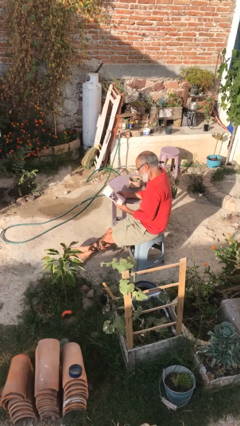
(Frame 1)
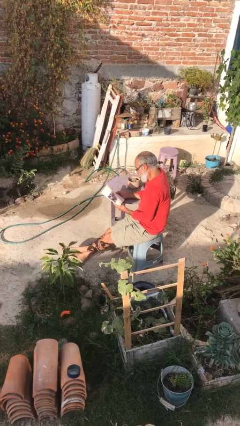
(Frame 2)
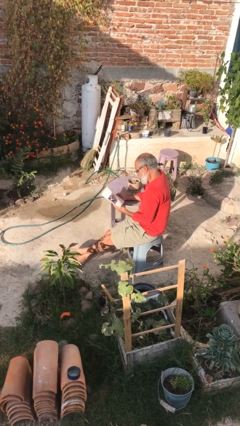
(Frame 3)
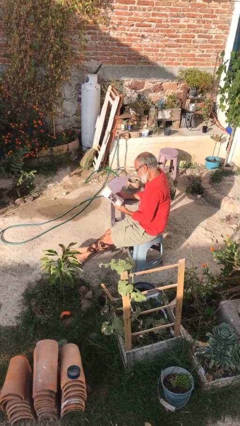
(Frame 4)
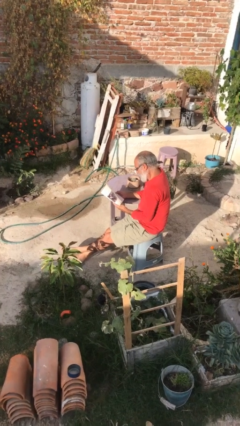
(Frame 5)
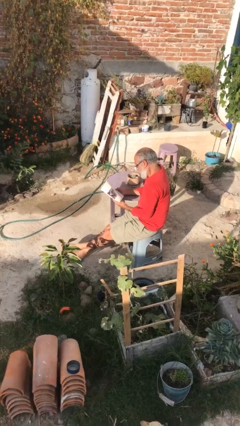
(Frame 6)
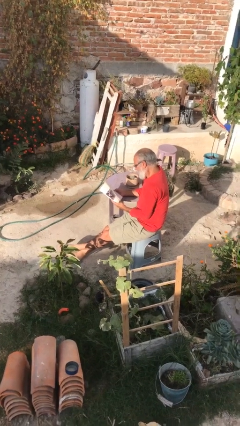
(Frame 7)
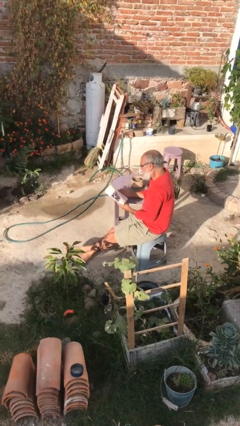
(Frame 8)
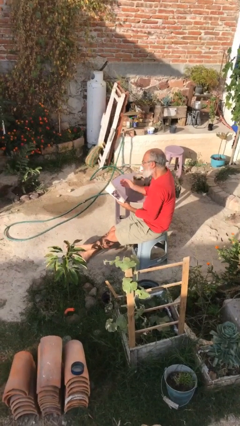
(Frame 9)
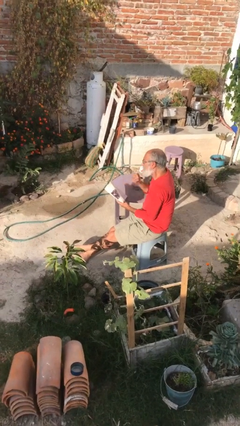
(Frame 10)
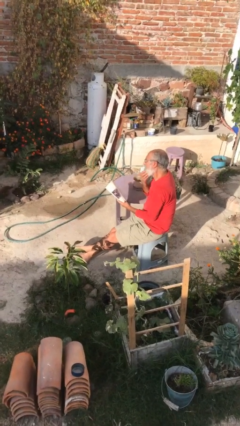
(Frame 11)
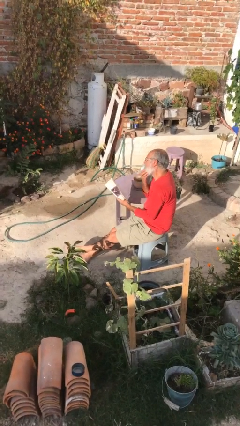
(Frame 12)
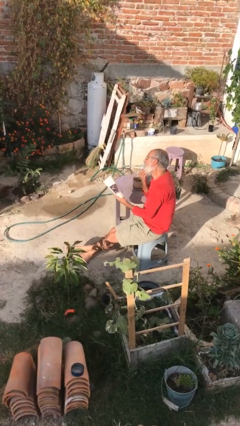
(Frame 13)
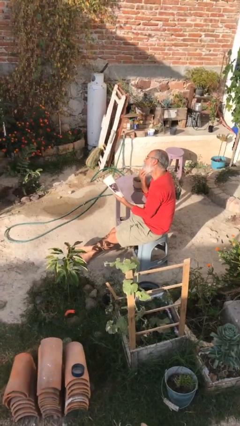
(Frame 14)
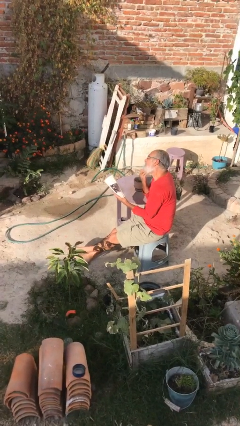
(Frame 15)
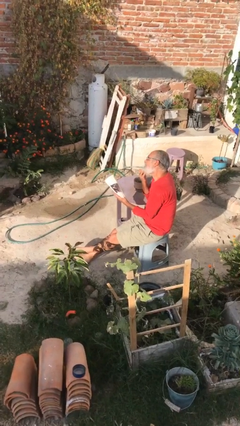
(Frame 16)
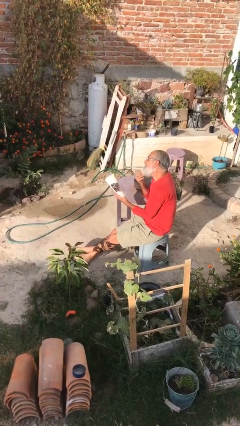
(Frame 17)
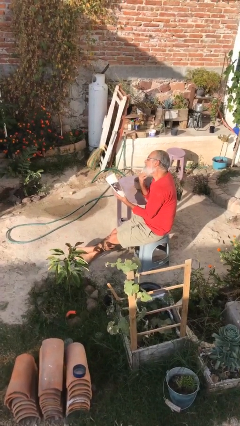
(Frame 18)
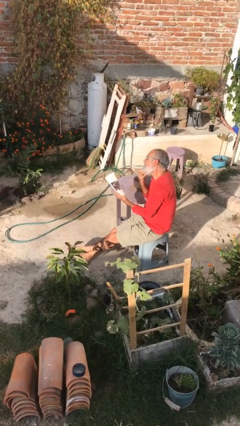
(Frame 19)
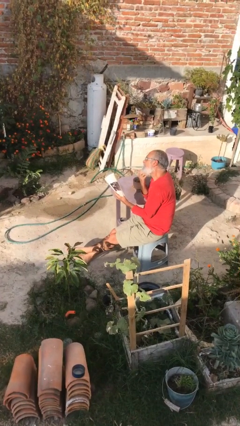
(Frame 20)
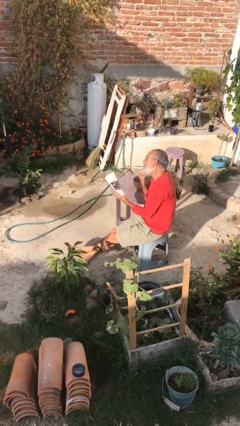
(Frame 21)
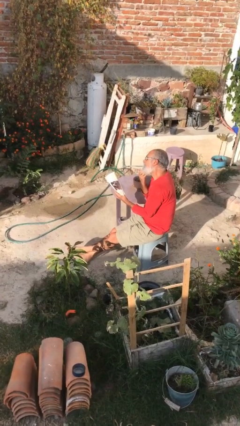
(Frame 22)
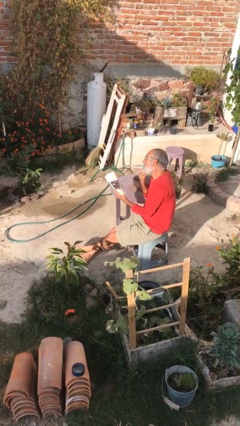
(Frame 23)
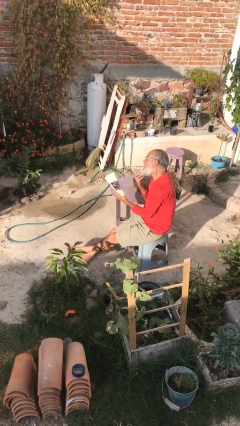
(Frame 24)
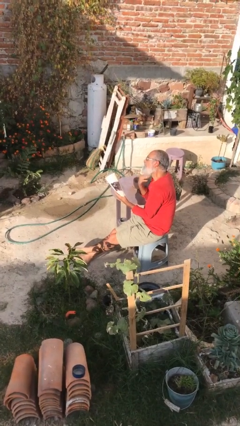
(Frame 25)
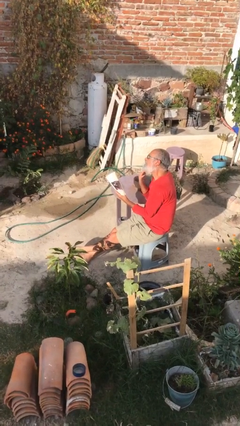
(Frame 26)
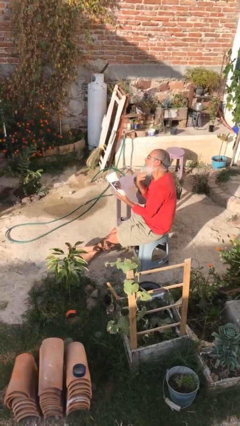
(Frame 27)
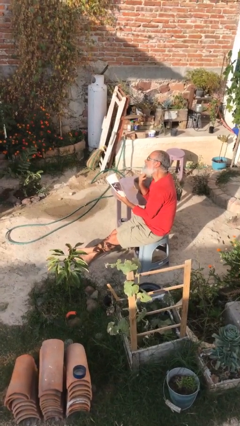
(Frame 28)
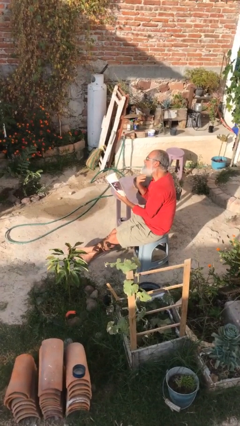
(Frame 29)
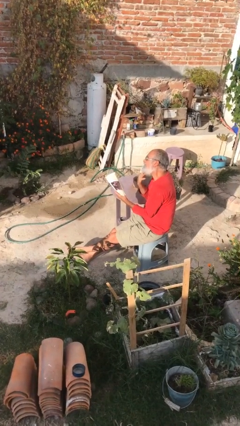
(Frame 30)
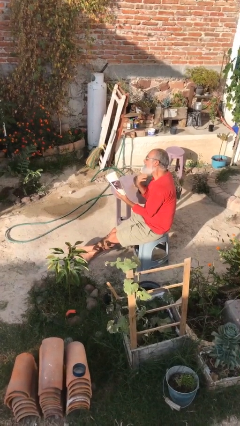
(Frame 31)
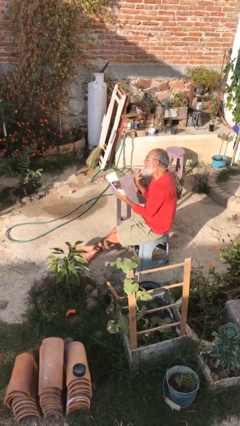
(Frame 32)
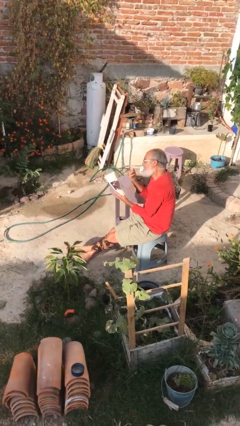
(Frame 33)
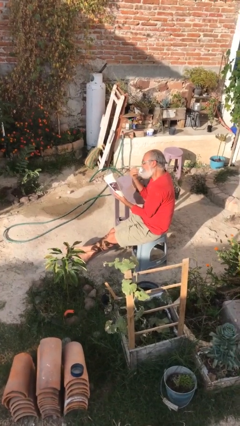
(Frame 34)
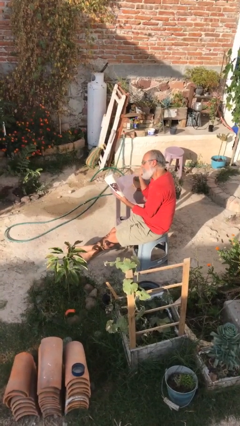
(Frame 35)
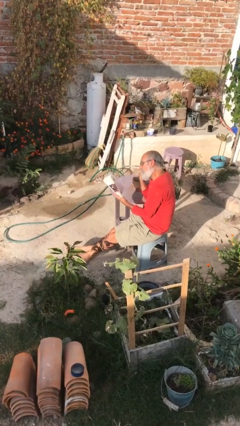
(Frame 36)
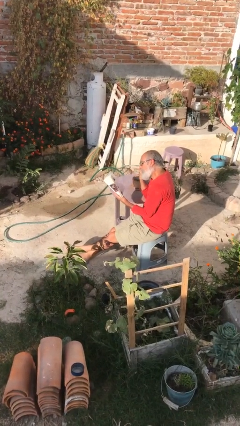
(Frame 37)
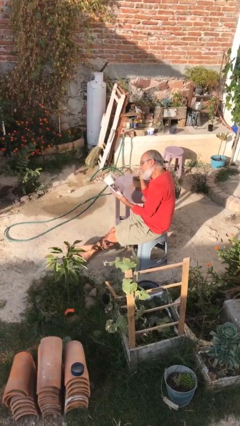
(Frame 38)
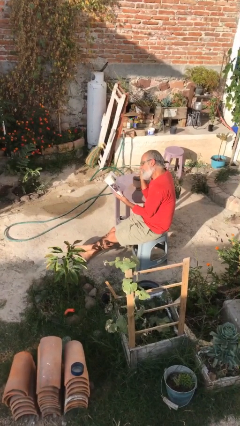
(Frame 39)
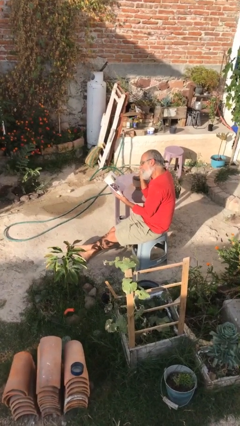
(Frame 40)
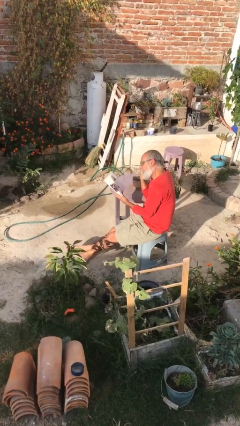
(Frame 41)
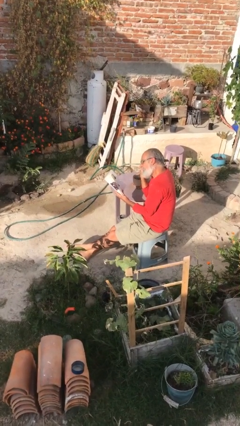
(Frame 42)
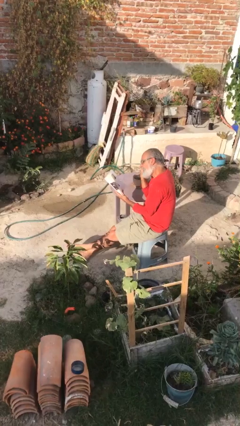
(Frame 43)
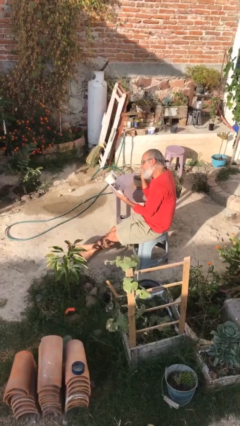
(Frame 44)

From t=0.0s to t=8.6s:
person reads document

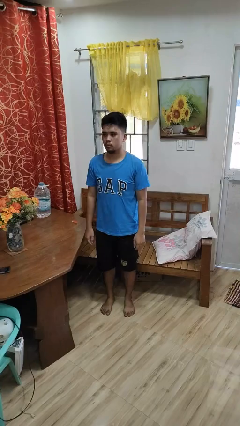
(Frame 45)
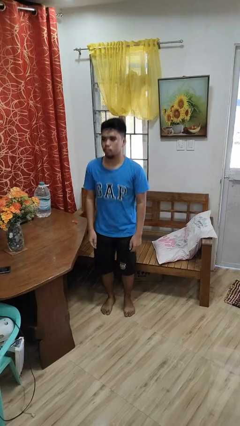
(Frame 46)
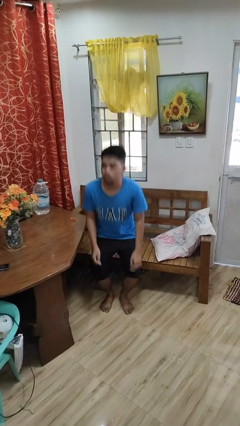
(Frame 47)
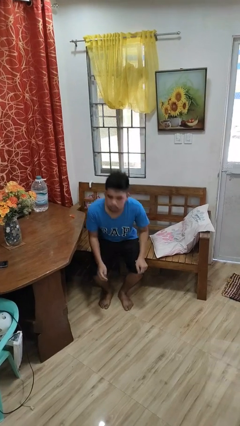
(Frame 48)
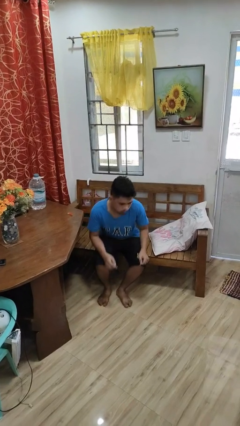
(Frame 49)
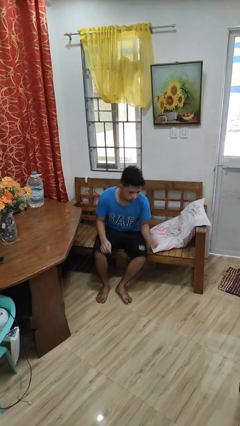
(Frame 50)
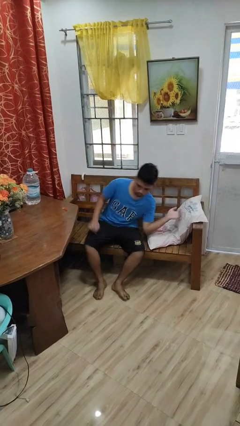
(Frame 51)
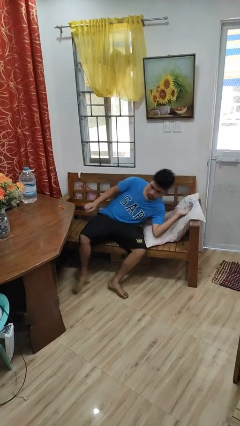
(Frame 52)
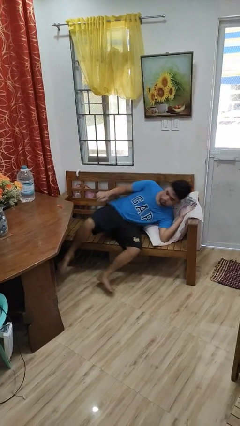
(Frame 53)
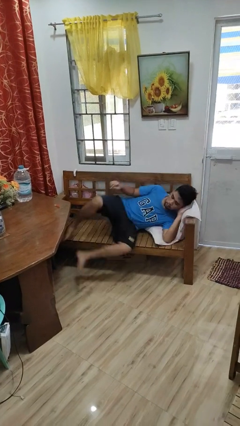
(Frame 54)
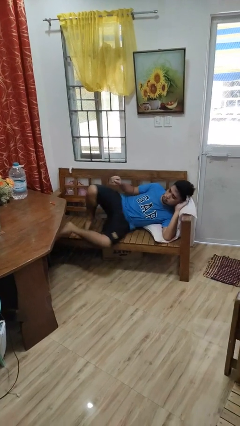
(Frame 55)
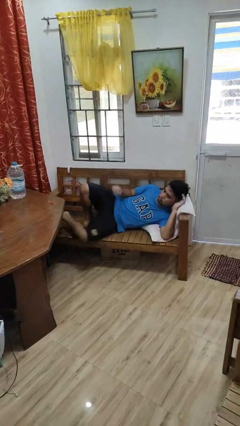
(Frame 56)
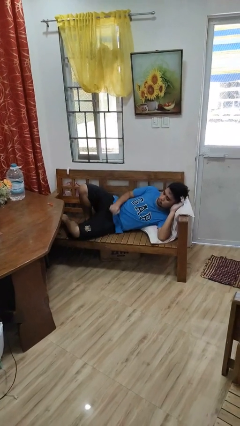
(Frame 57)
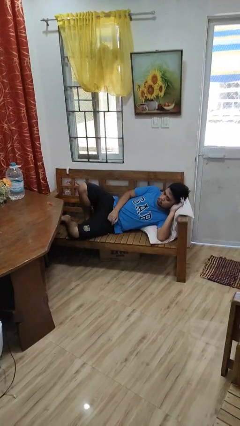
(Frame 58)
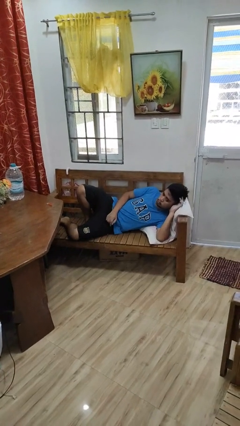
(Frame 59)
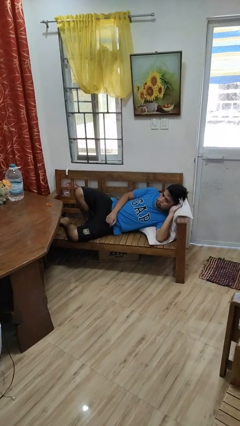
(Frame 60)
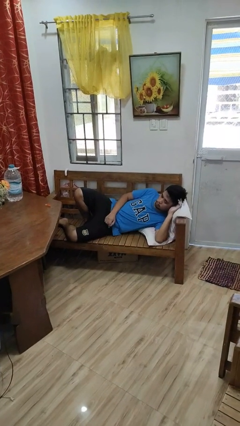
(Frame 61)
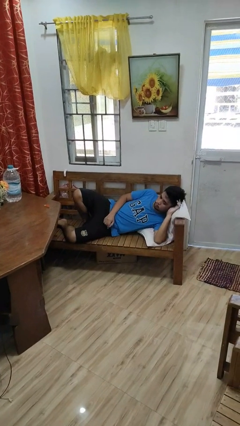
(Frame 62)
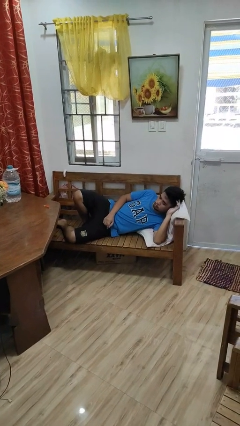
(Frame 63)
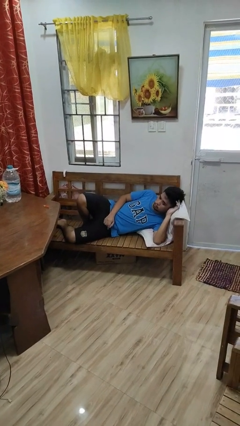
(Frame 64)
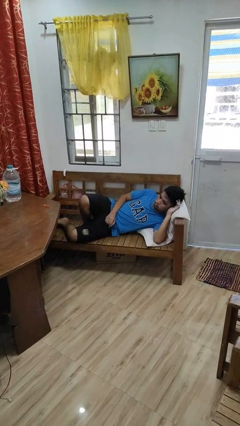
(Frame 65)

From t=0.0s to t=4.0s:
person lies down on couch

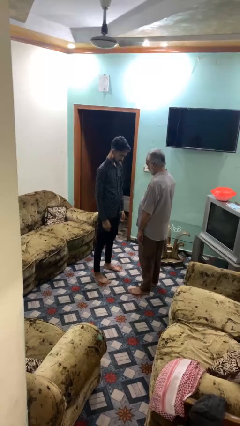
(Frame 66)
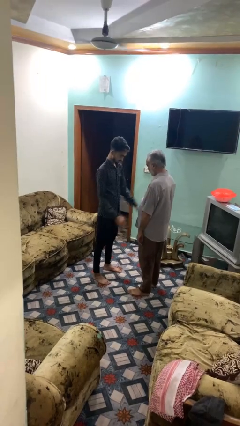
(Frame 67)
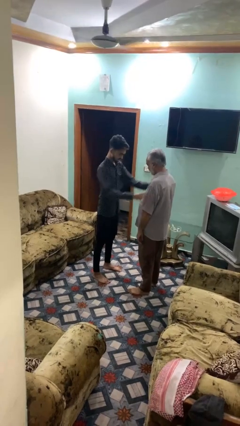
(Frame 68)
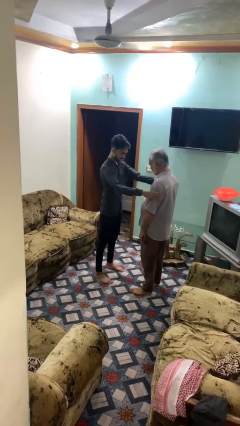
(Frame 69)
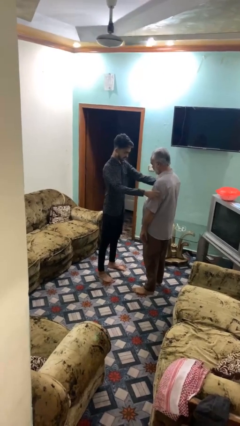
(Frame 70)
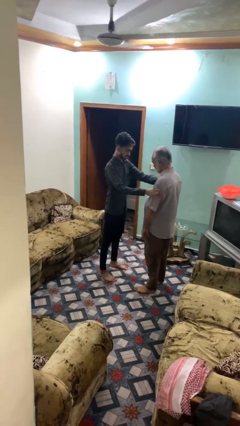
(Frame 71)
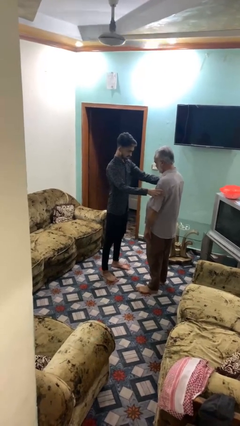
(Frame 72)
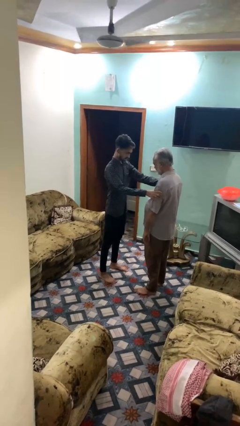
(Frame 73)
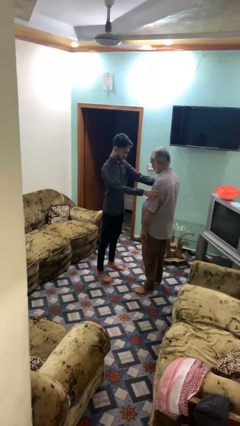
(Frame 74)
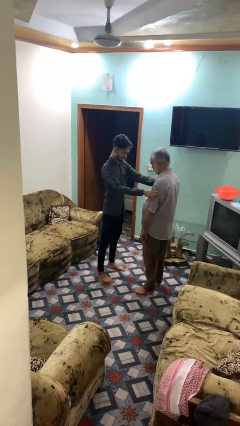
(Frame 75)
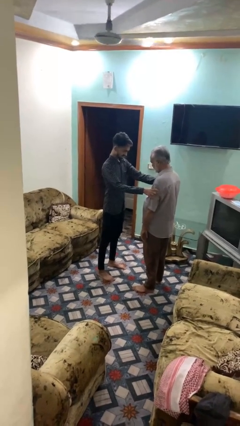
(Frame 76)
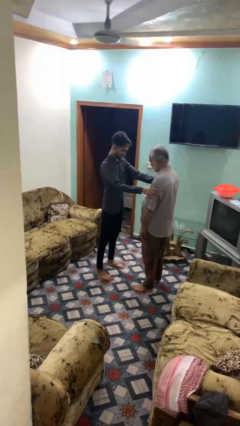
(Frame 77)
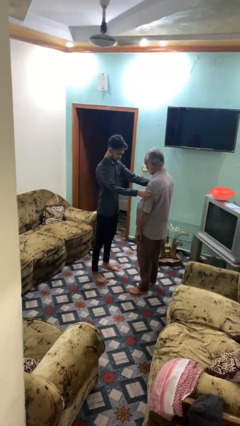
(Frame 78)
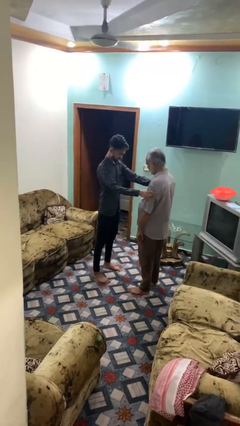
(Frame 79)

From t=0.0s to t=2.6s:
person grabs person by bicep

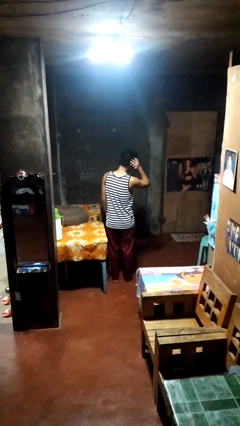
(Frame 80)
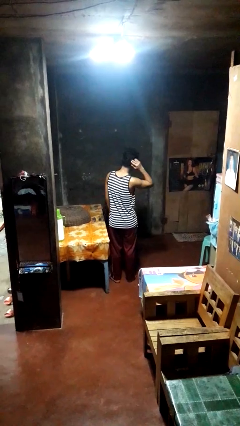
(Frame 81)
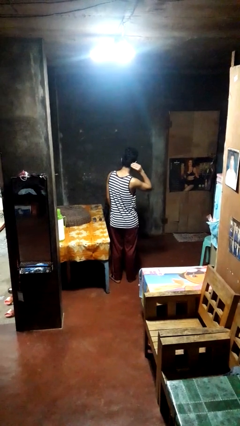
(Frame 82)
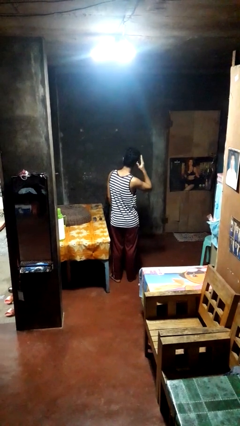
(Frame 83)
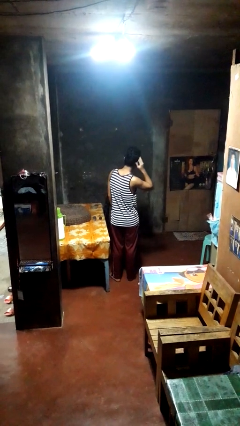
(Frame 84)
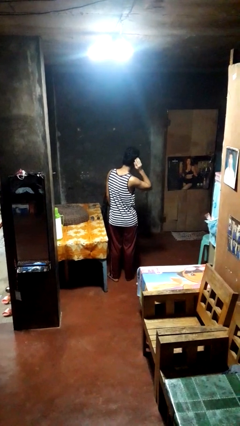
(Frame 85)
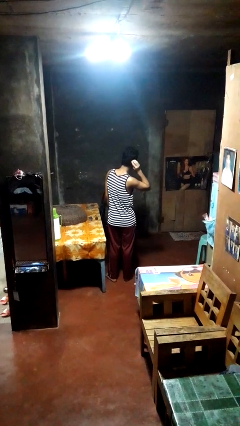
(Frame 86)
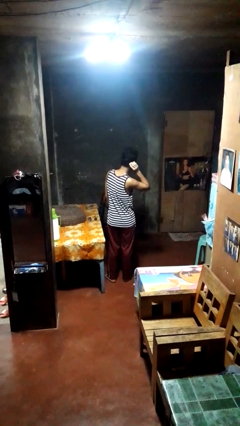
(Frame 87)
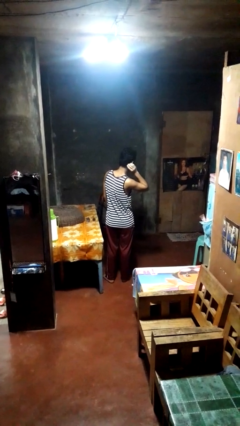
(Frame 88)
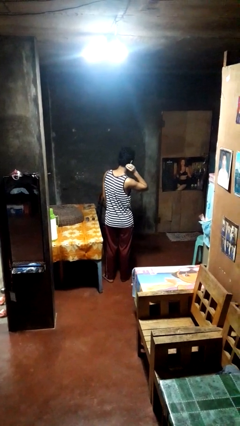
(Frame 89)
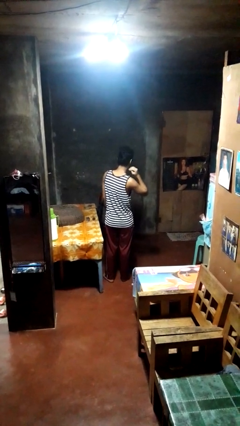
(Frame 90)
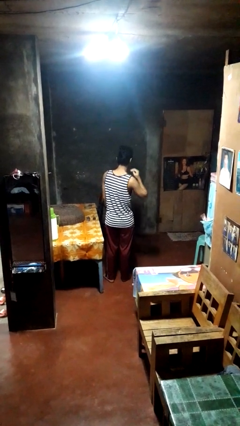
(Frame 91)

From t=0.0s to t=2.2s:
person strokes hair

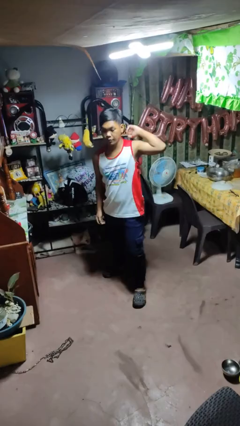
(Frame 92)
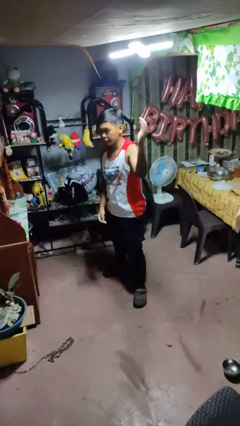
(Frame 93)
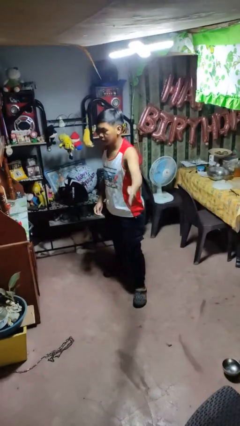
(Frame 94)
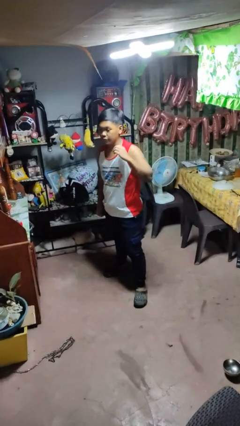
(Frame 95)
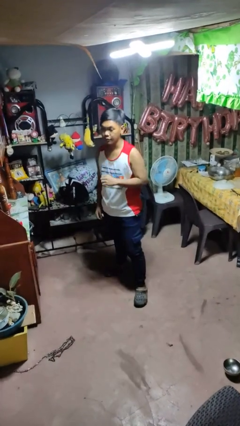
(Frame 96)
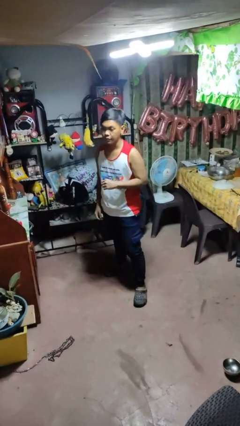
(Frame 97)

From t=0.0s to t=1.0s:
person karate chop
